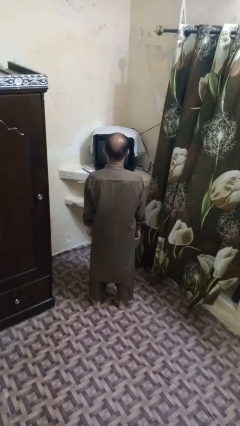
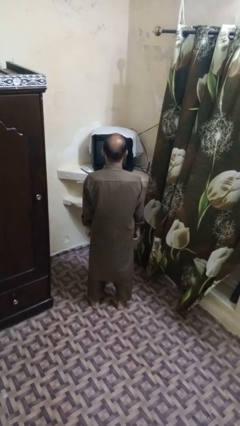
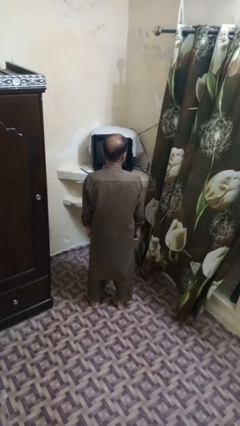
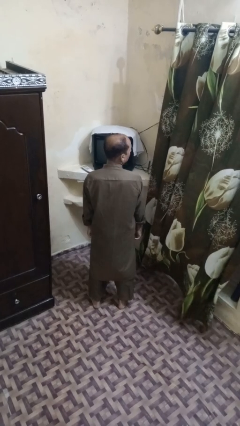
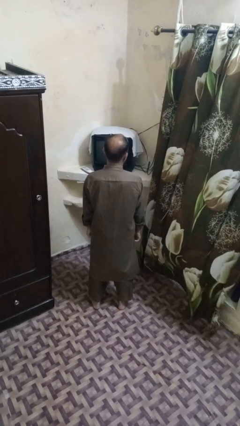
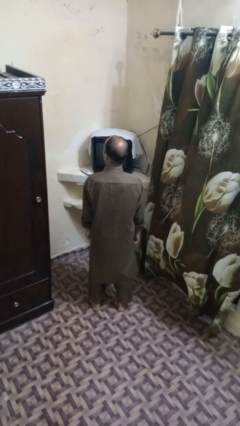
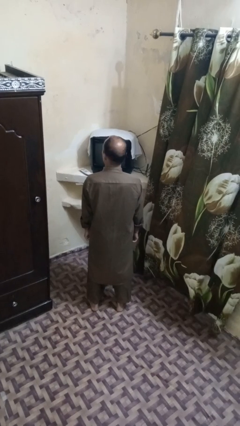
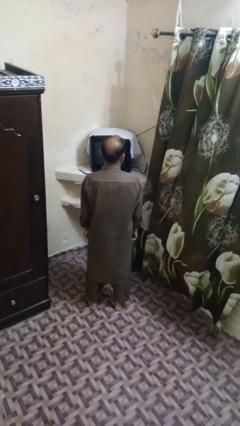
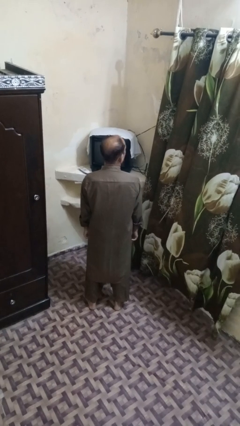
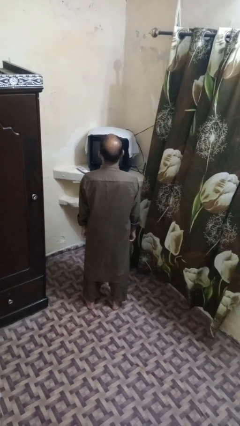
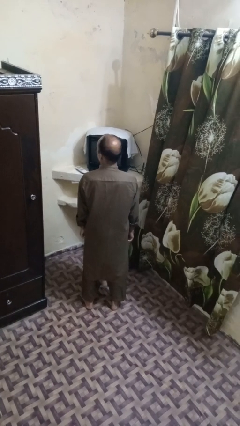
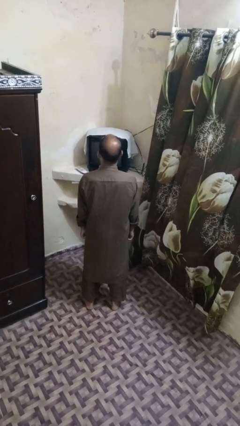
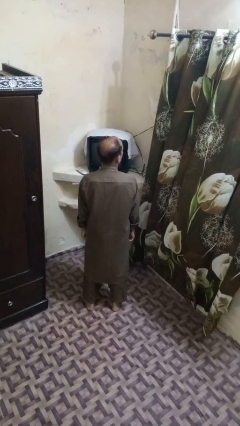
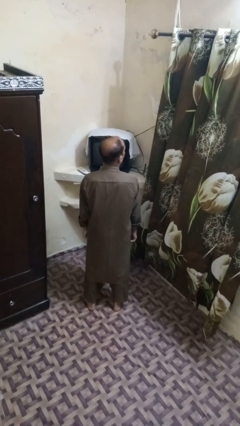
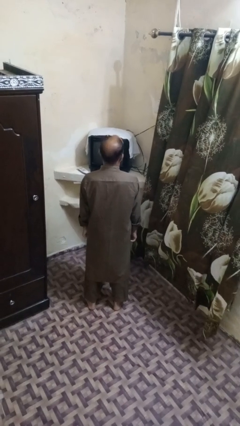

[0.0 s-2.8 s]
person shakes head

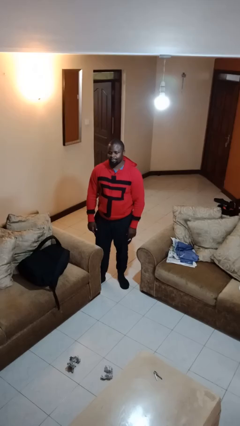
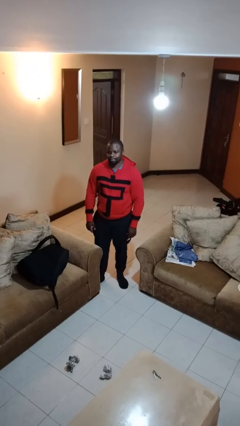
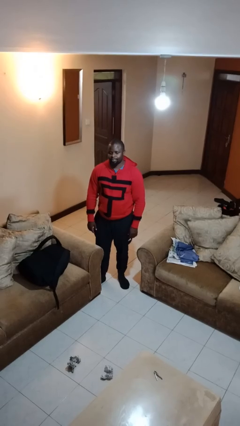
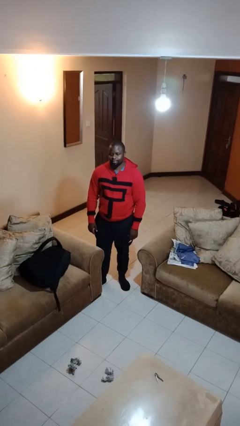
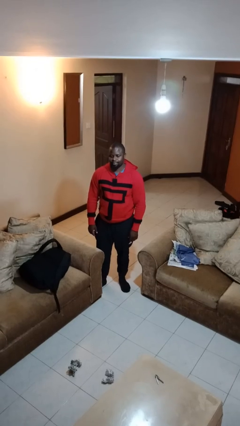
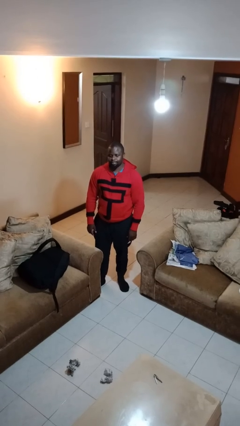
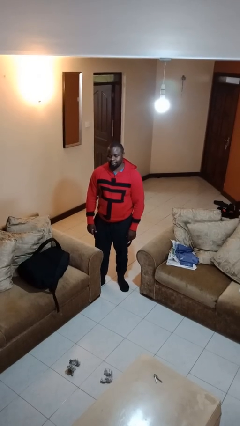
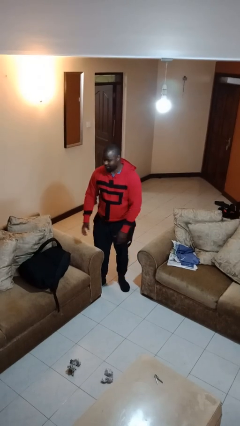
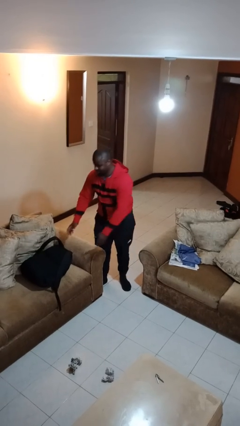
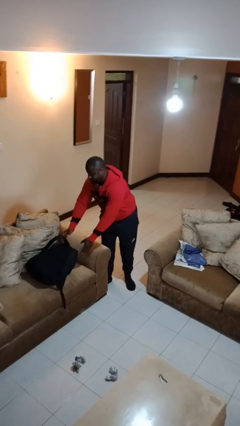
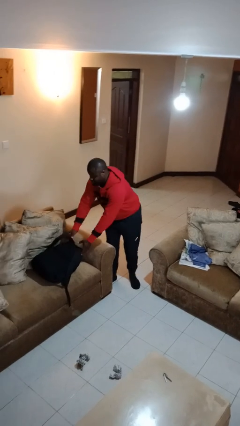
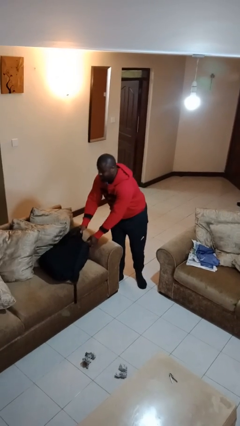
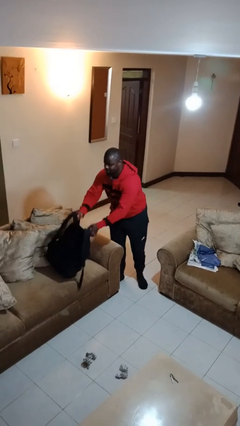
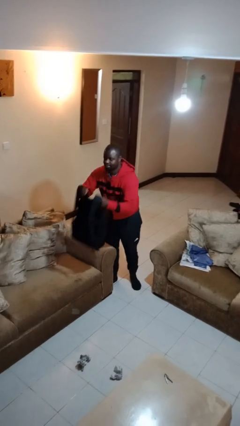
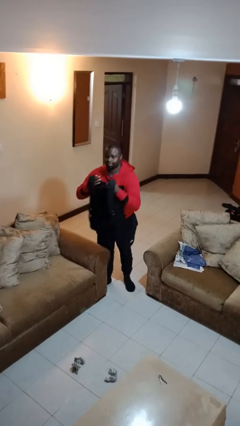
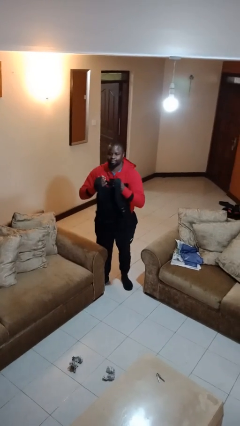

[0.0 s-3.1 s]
person picks up object from couch

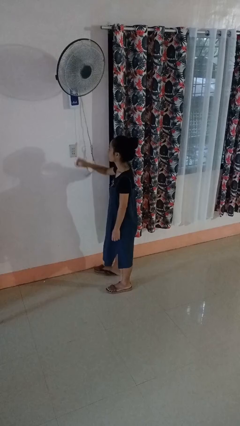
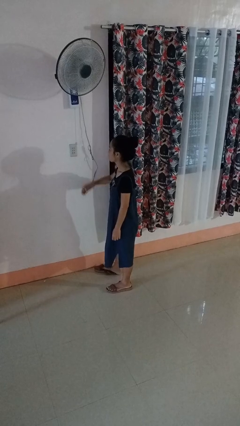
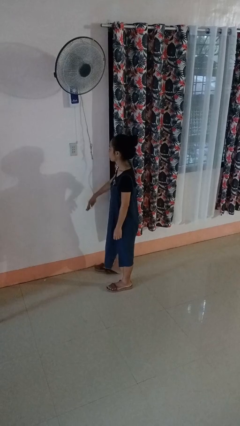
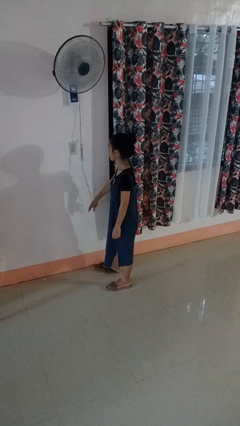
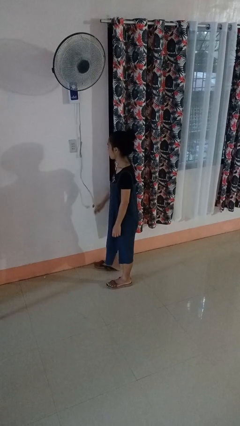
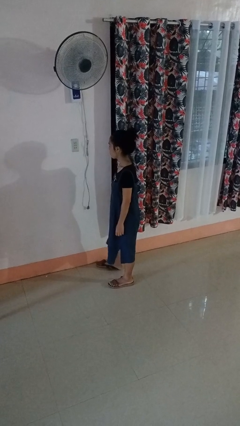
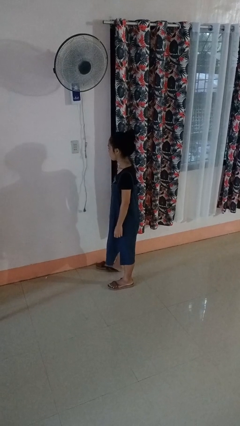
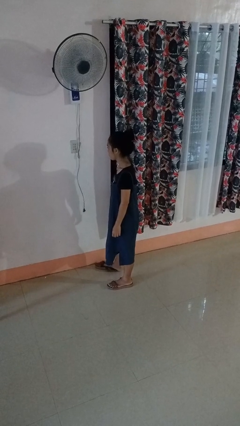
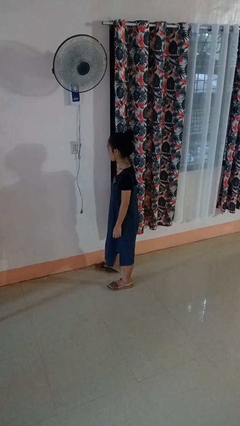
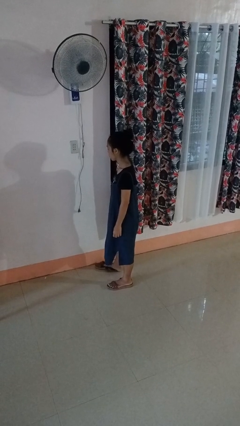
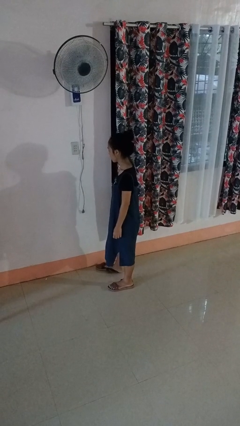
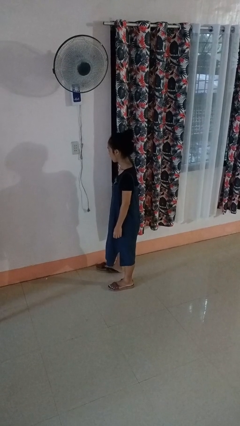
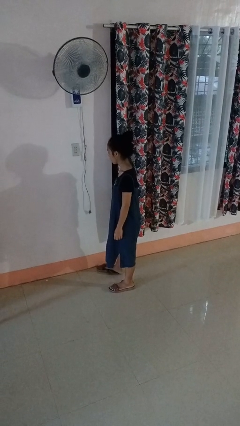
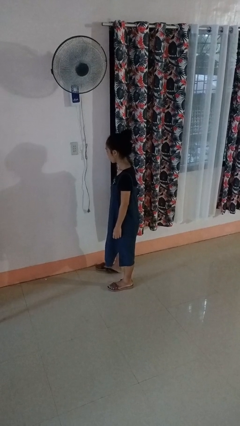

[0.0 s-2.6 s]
person unplugs from electrical socket

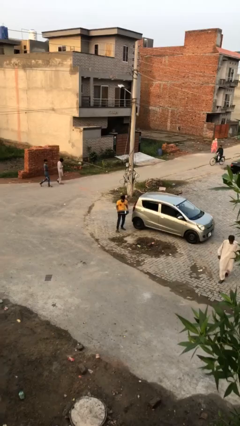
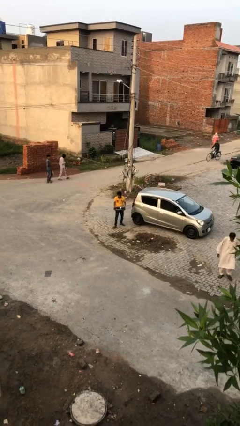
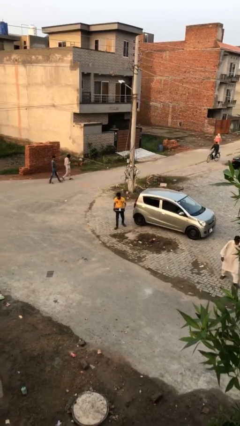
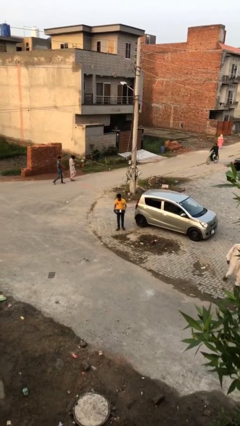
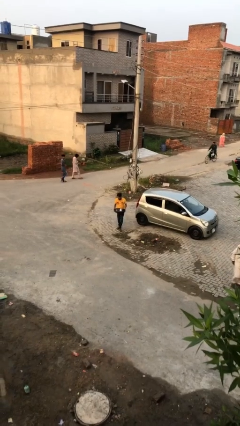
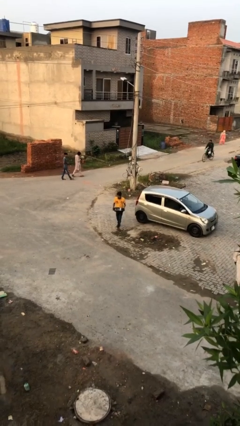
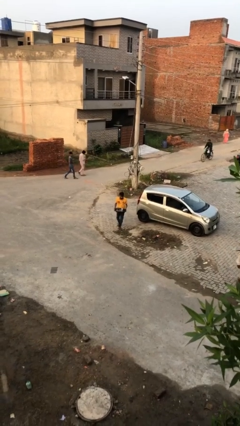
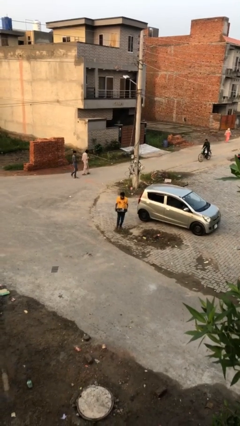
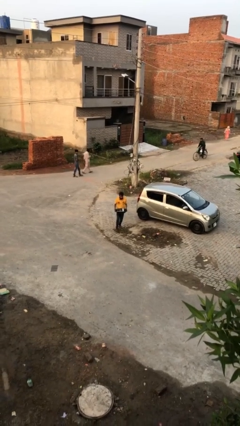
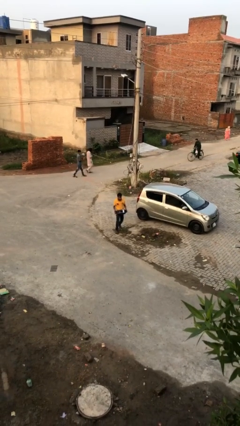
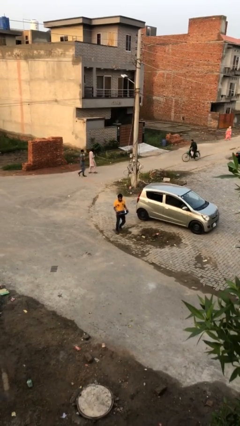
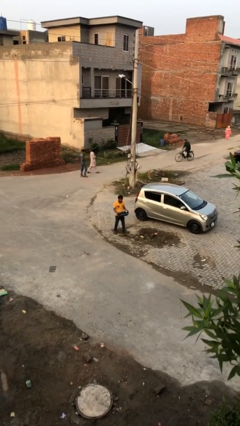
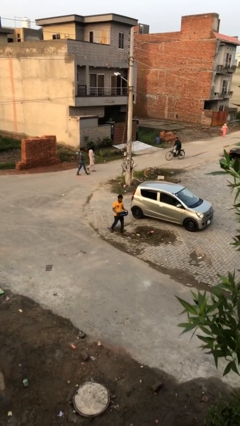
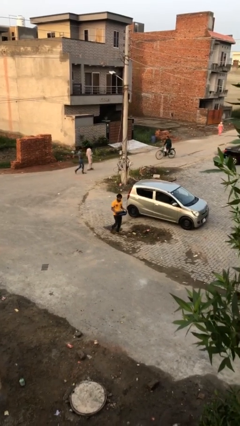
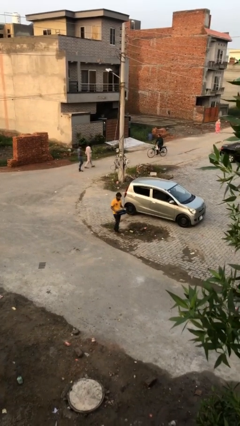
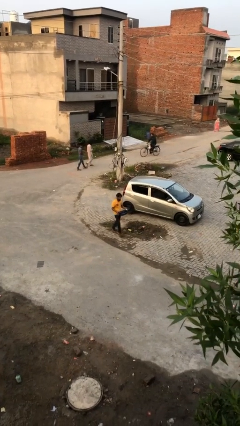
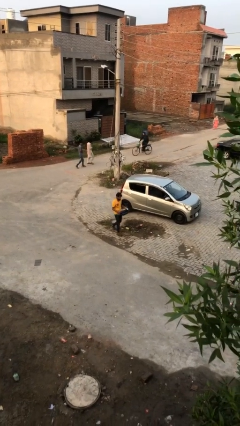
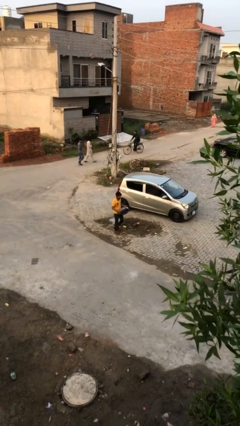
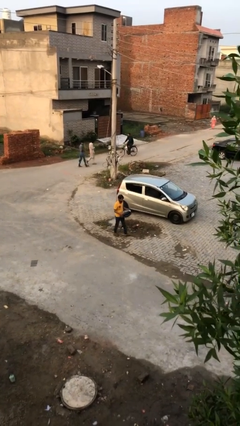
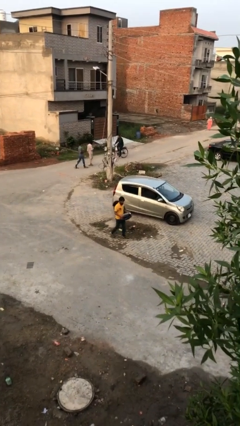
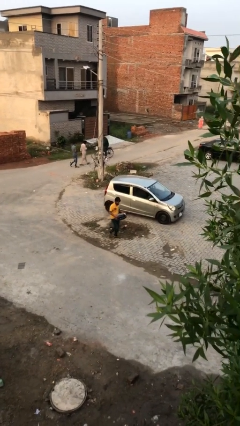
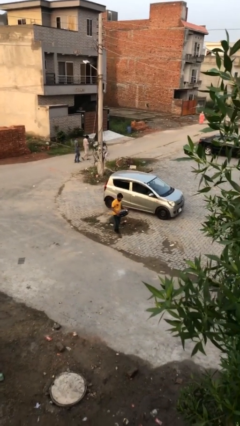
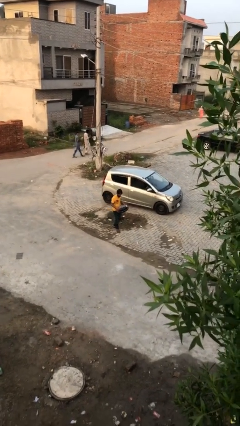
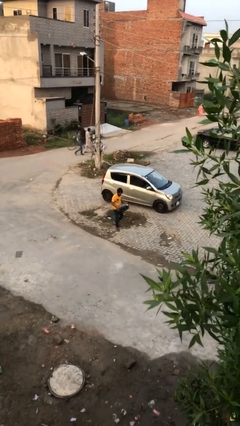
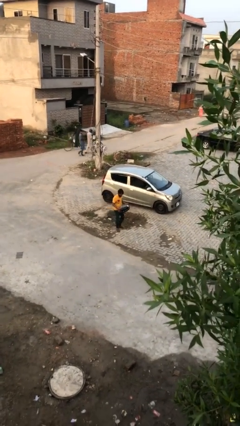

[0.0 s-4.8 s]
person carries heavy object

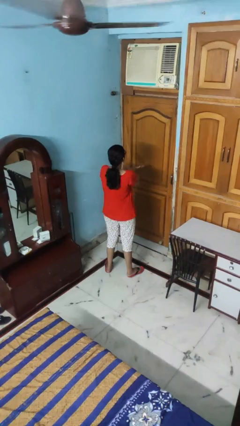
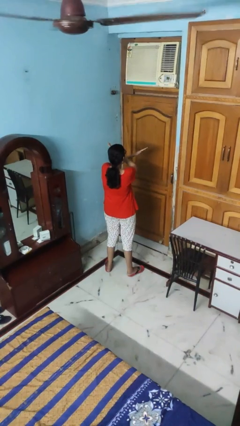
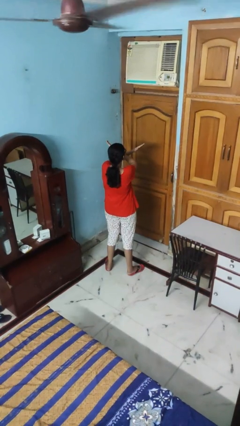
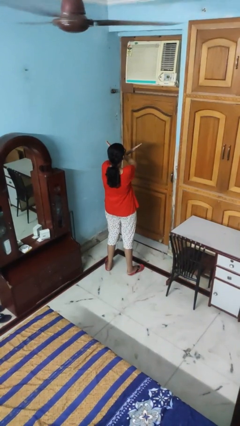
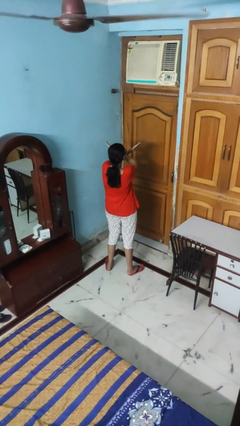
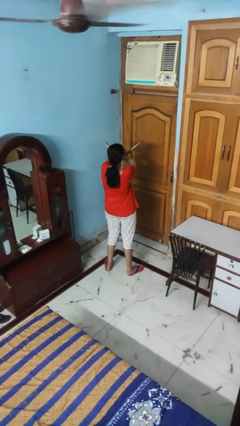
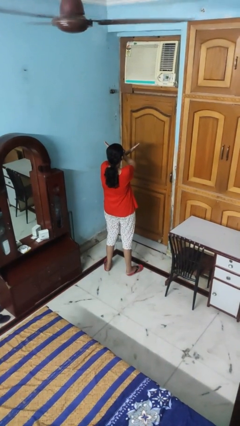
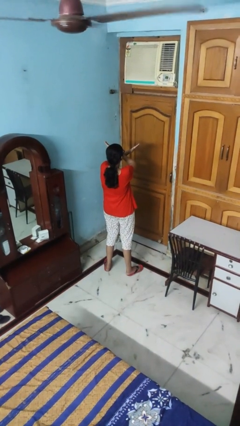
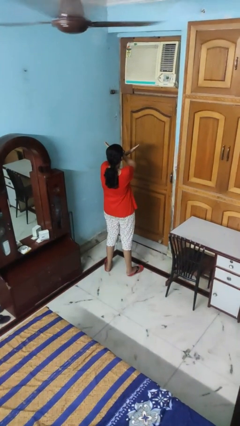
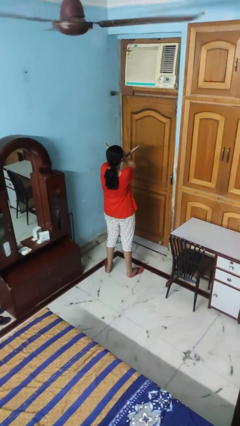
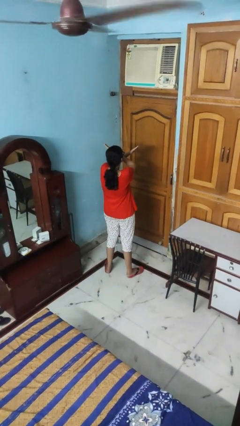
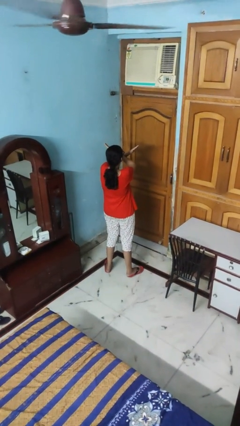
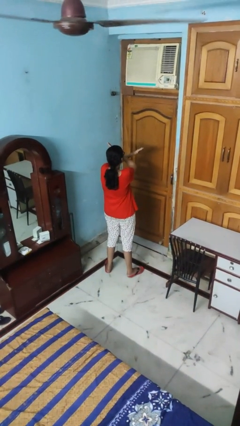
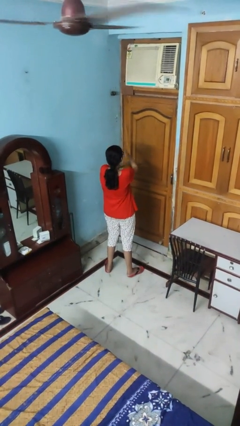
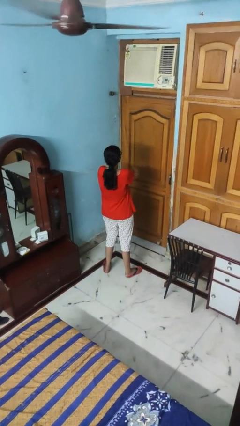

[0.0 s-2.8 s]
person gestures arms x

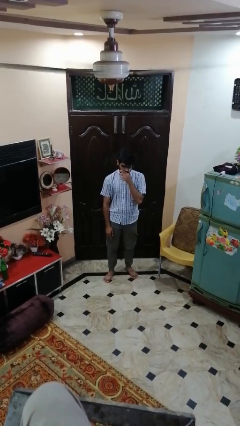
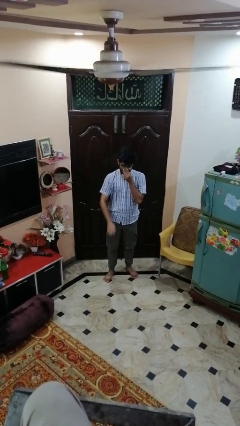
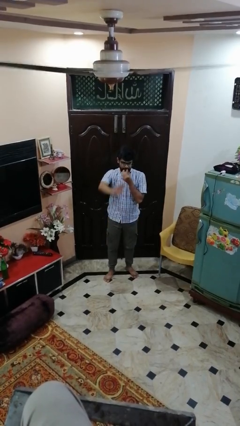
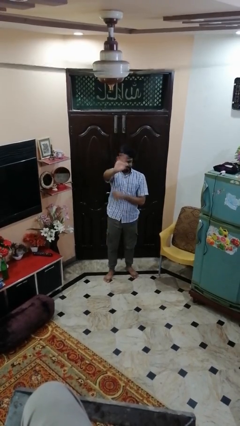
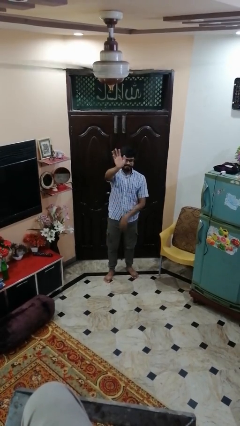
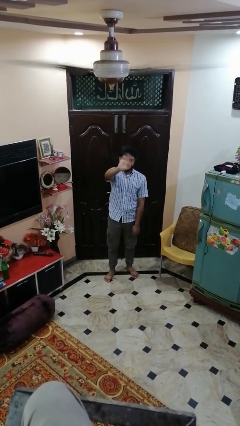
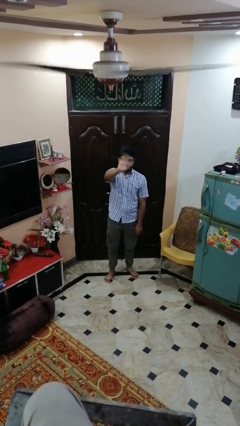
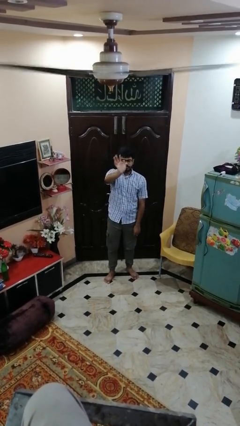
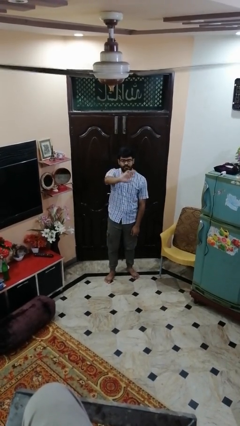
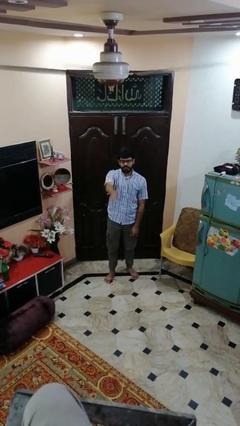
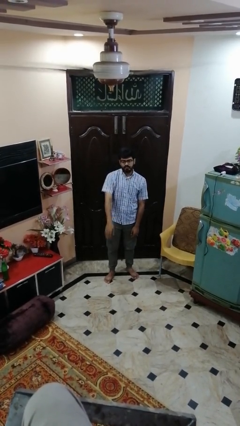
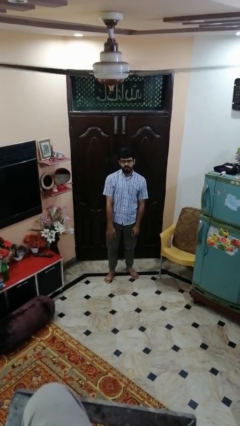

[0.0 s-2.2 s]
person waves at person
